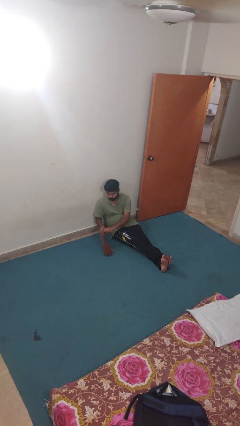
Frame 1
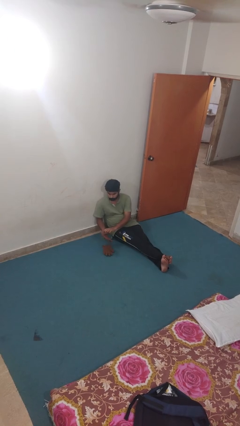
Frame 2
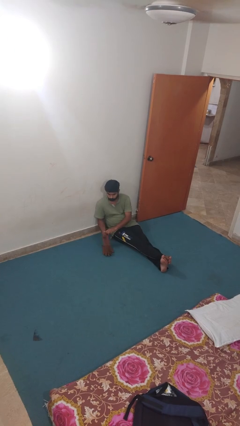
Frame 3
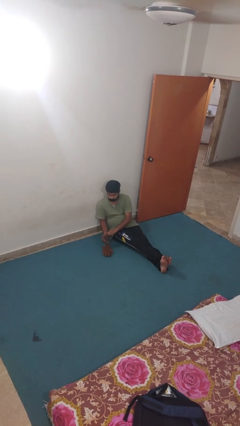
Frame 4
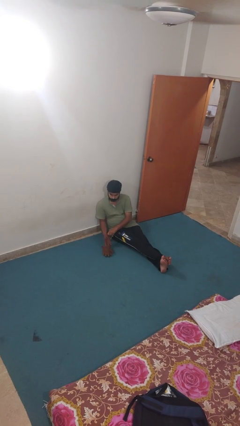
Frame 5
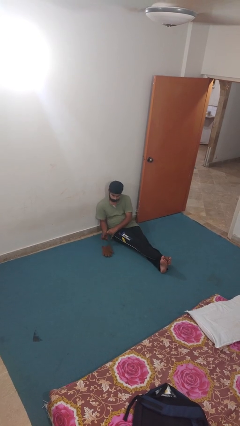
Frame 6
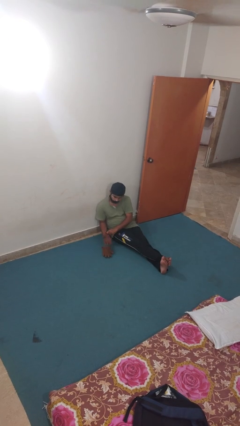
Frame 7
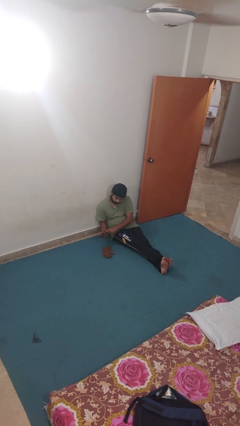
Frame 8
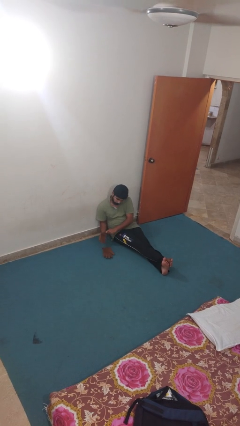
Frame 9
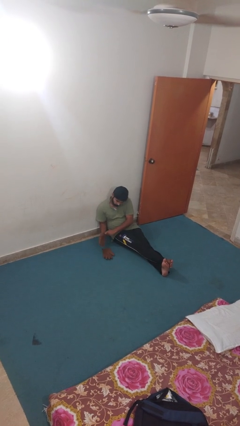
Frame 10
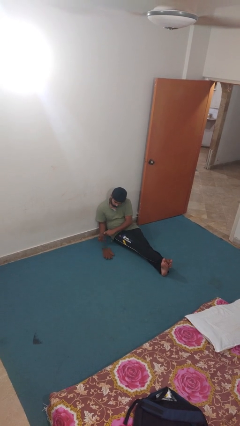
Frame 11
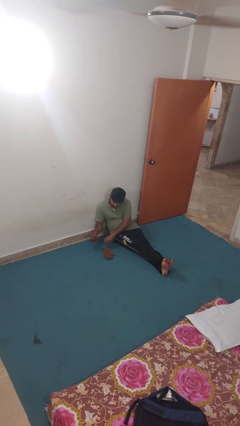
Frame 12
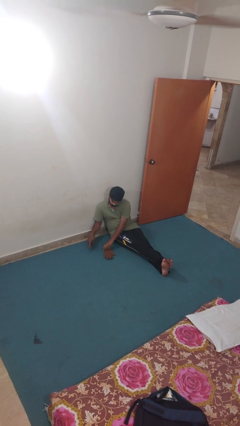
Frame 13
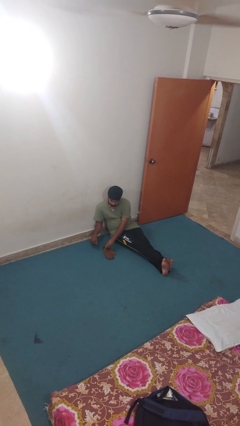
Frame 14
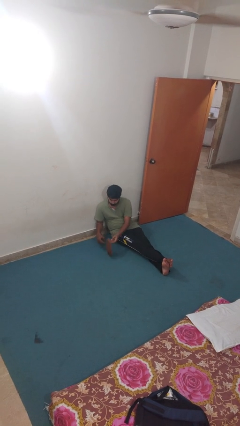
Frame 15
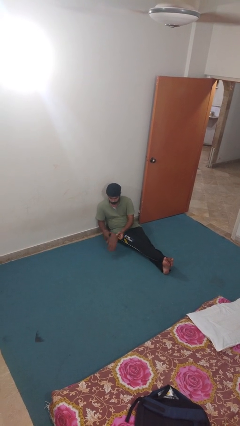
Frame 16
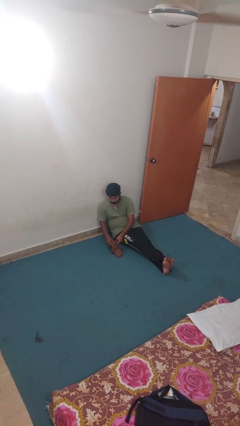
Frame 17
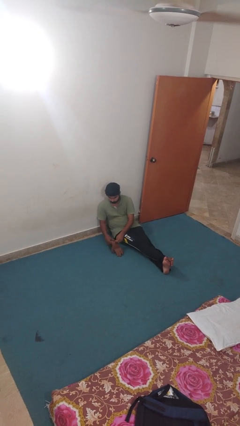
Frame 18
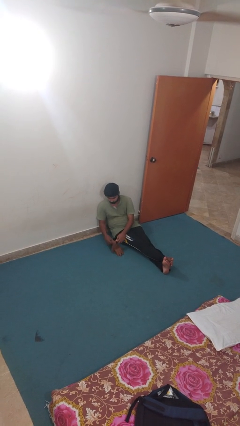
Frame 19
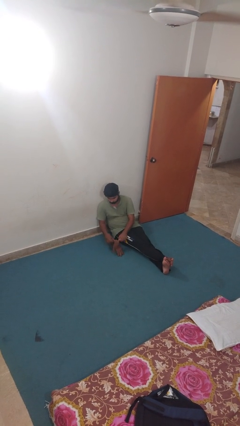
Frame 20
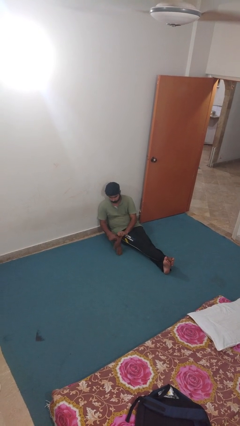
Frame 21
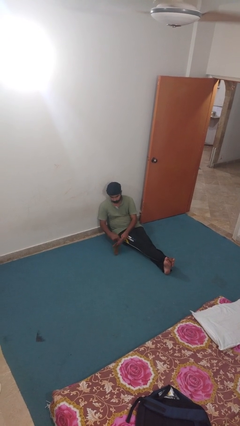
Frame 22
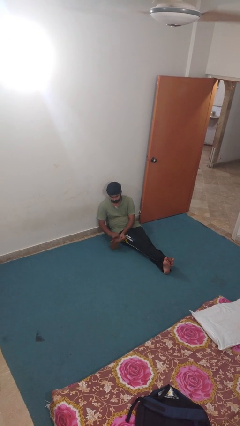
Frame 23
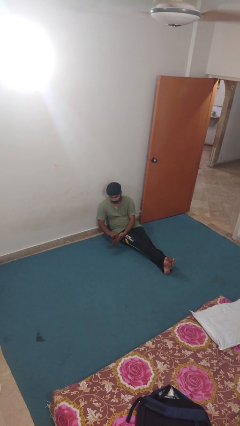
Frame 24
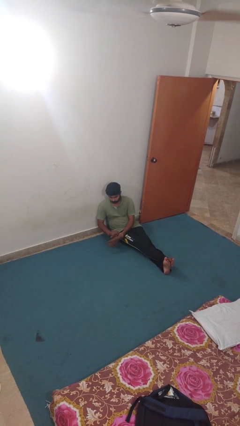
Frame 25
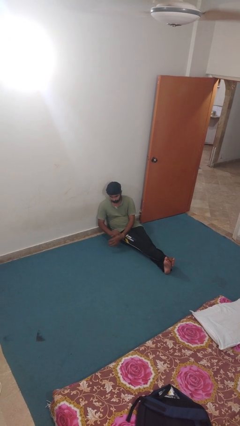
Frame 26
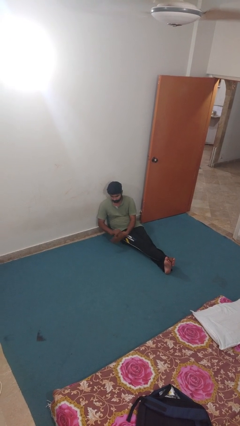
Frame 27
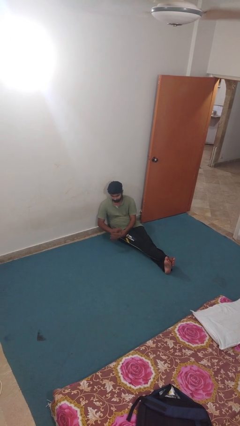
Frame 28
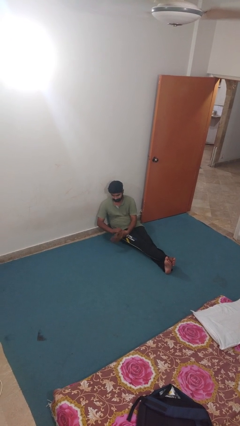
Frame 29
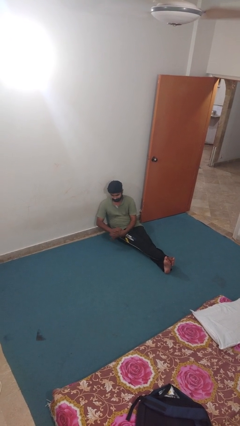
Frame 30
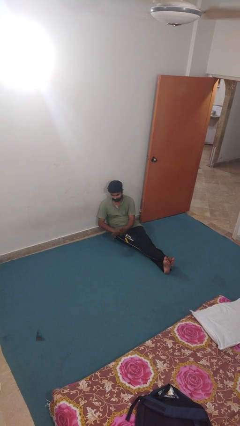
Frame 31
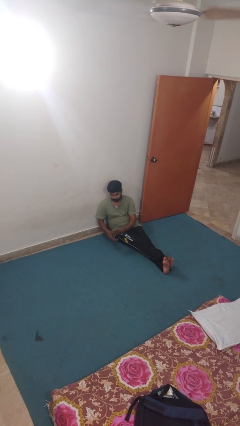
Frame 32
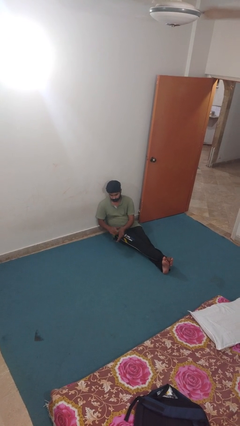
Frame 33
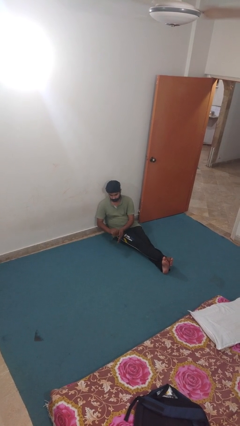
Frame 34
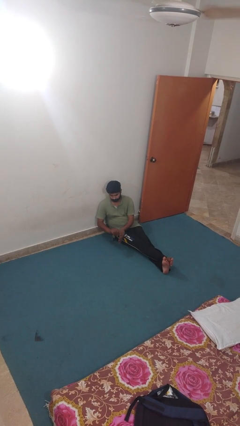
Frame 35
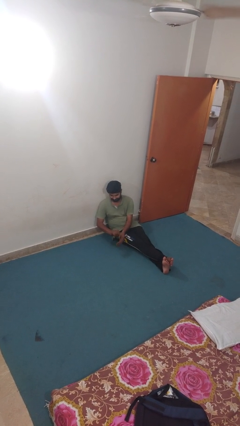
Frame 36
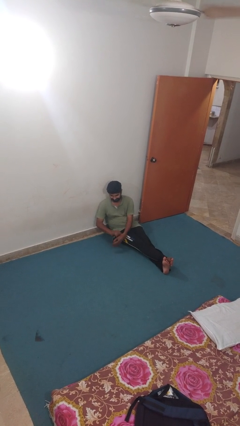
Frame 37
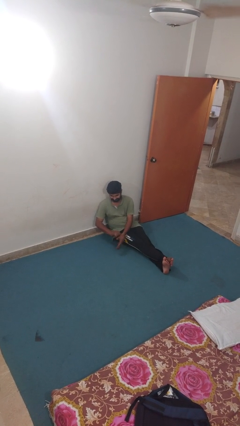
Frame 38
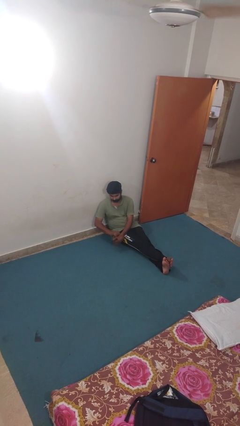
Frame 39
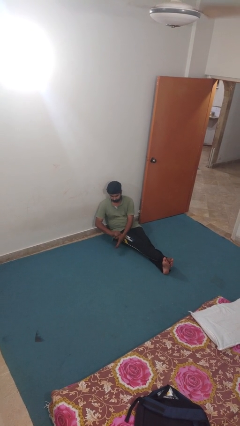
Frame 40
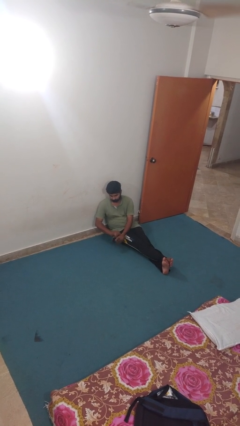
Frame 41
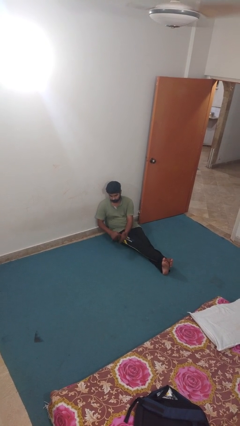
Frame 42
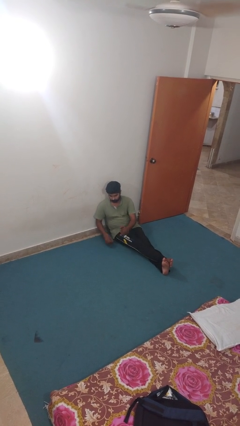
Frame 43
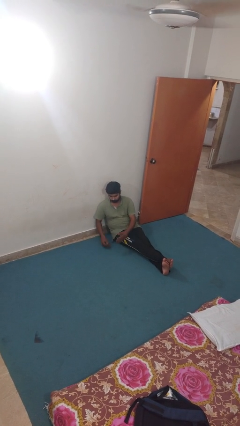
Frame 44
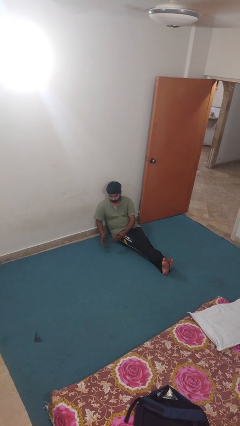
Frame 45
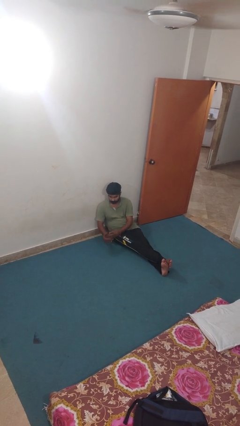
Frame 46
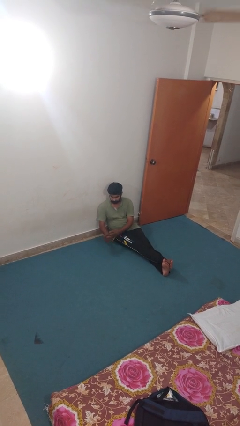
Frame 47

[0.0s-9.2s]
person puts on gloves

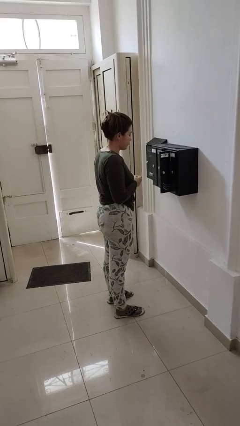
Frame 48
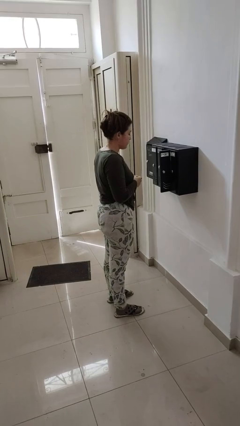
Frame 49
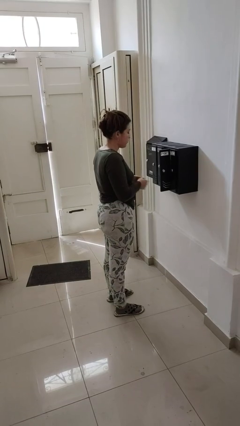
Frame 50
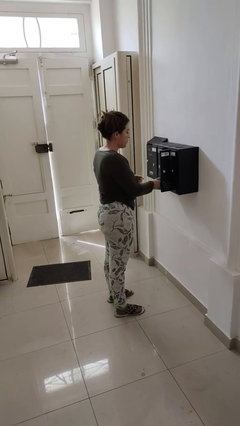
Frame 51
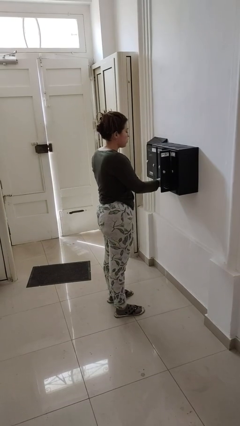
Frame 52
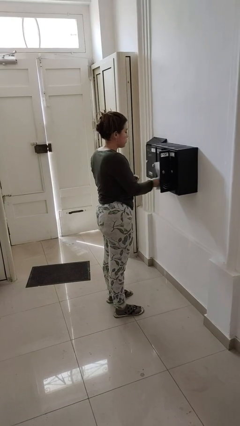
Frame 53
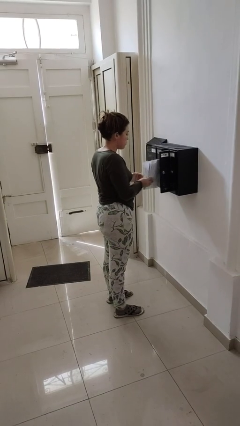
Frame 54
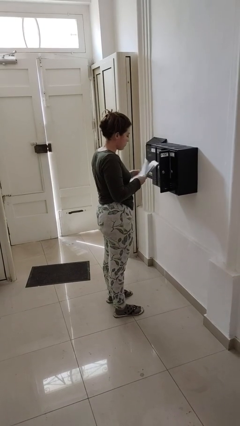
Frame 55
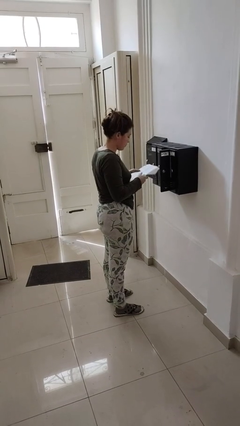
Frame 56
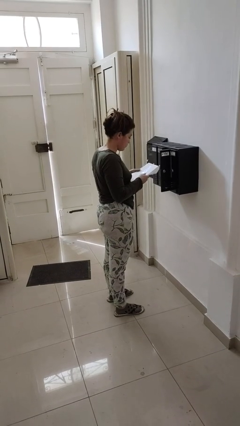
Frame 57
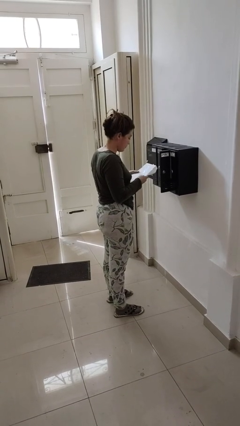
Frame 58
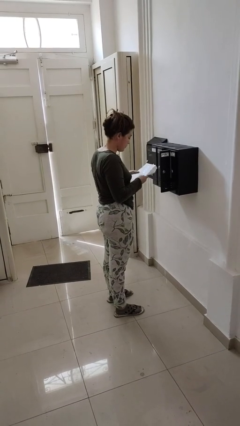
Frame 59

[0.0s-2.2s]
person takes letters from mailbox

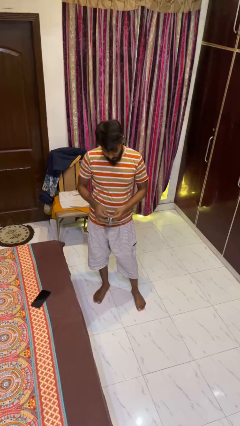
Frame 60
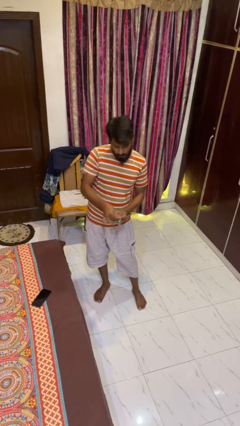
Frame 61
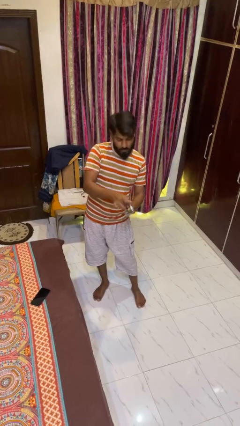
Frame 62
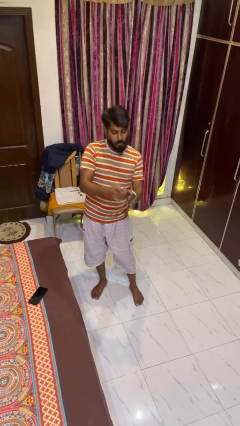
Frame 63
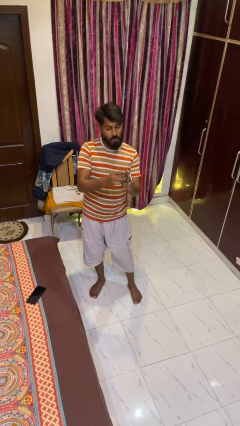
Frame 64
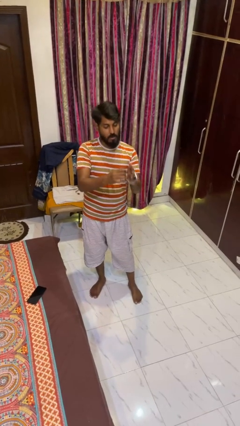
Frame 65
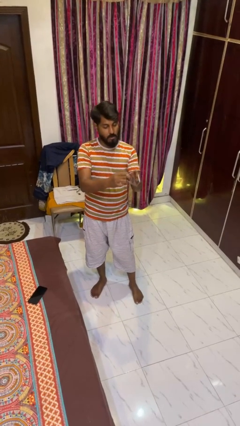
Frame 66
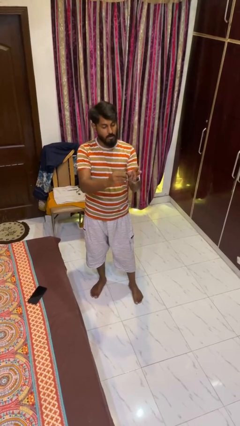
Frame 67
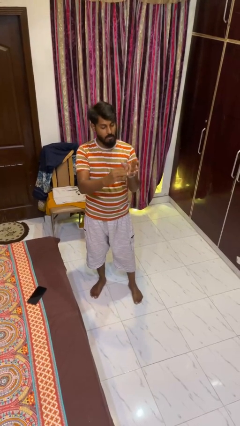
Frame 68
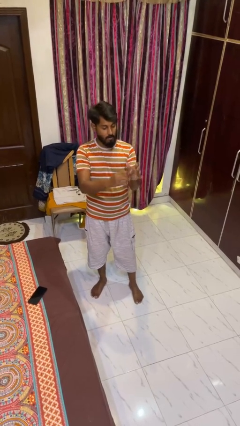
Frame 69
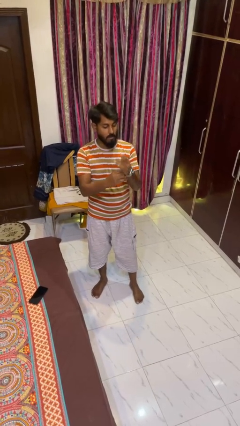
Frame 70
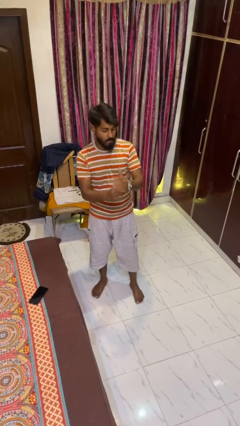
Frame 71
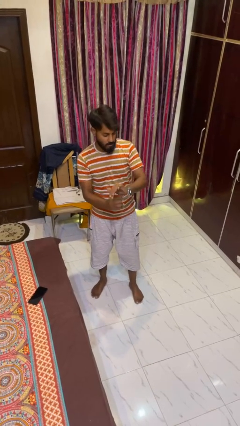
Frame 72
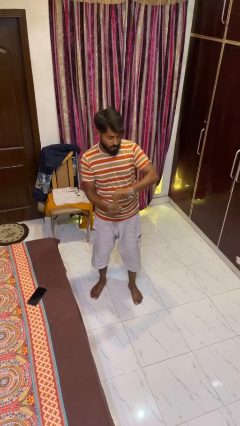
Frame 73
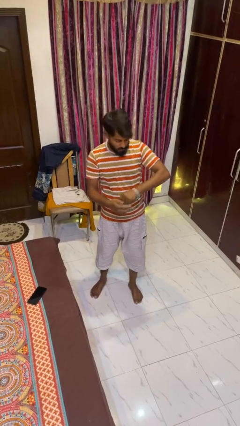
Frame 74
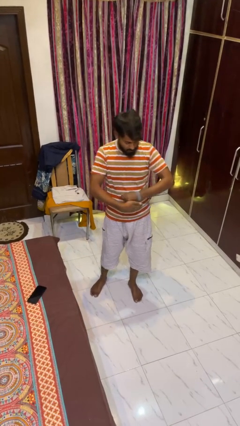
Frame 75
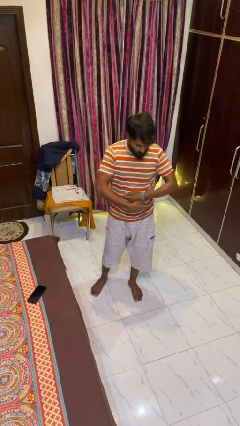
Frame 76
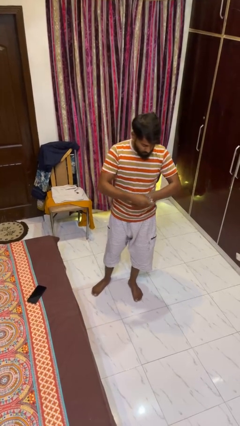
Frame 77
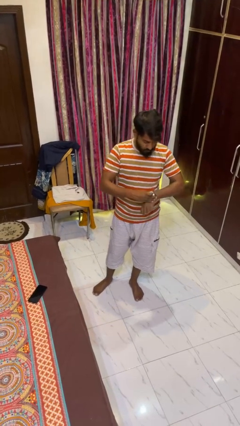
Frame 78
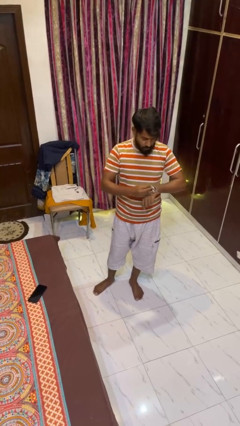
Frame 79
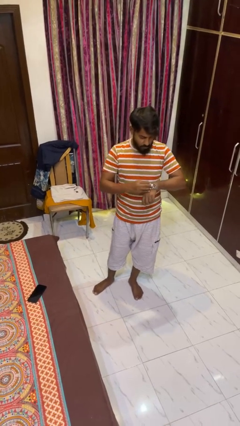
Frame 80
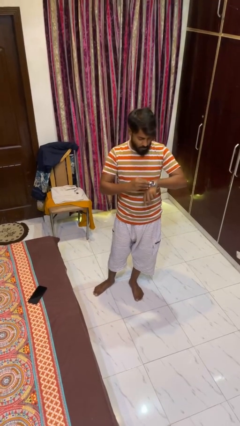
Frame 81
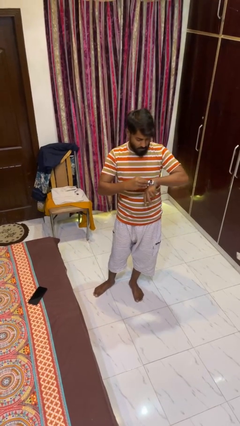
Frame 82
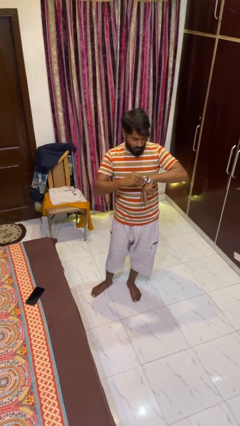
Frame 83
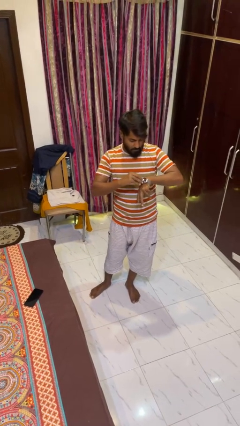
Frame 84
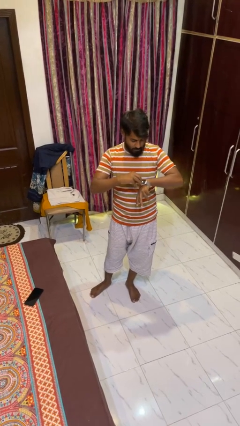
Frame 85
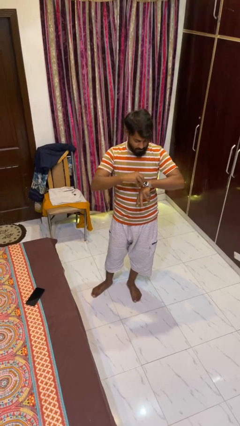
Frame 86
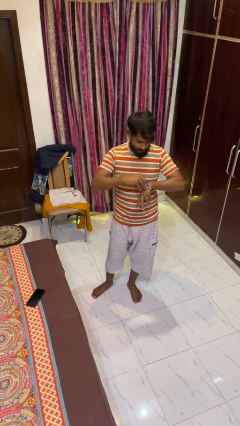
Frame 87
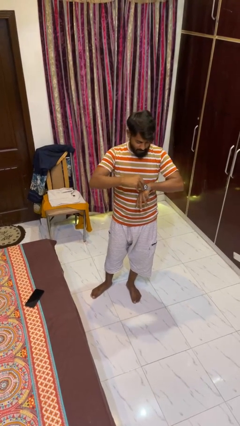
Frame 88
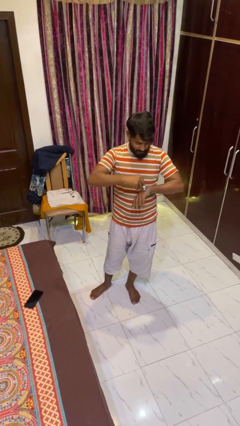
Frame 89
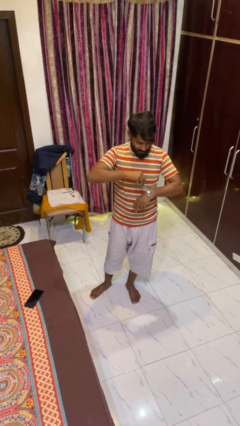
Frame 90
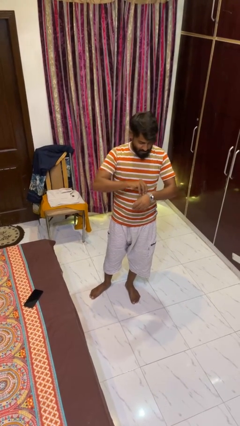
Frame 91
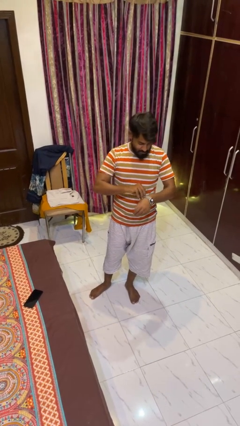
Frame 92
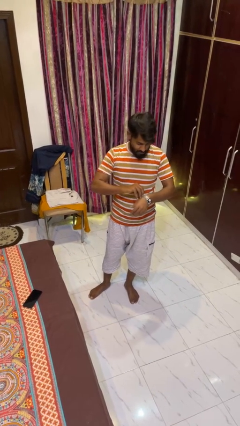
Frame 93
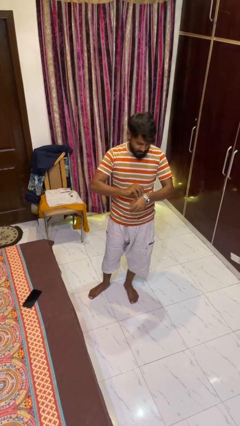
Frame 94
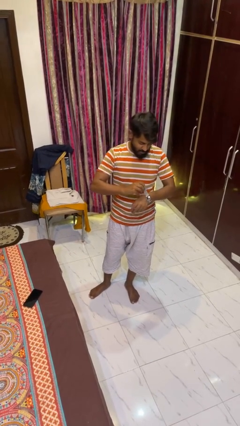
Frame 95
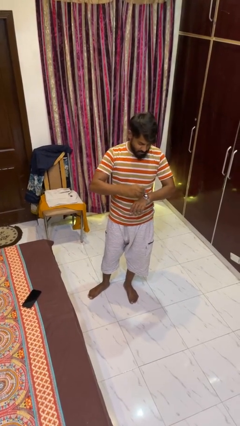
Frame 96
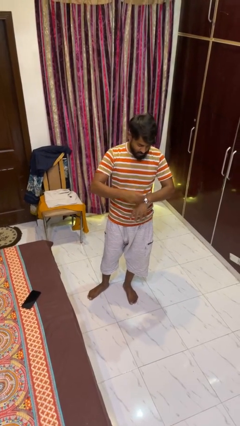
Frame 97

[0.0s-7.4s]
person puts on wristwatch
